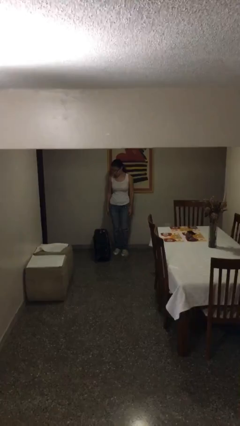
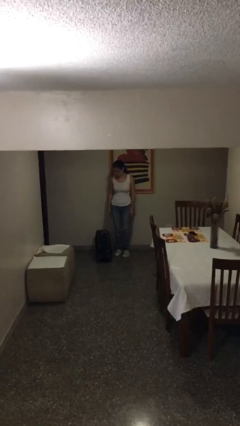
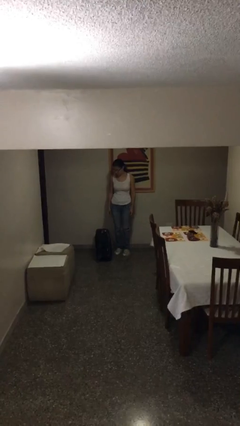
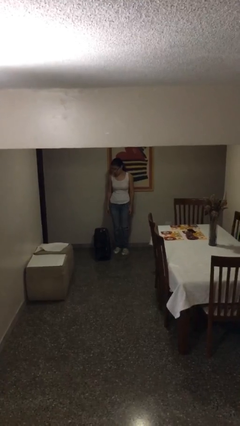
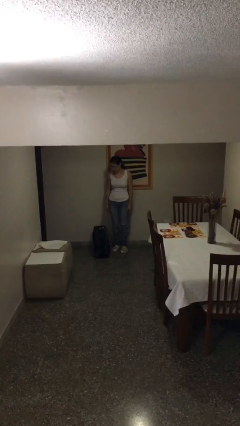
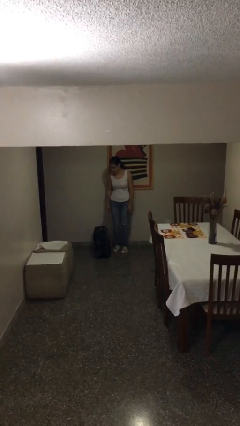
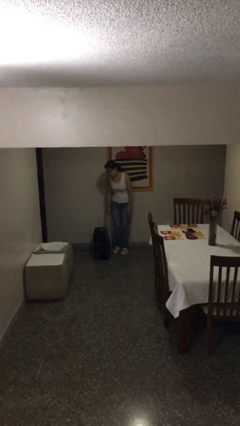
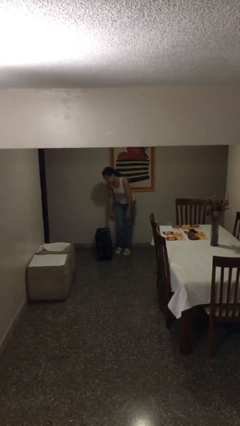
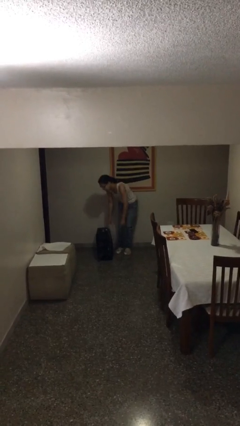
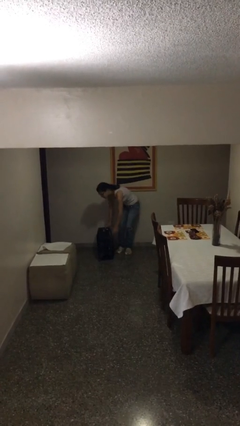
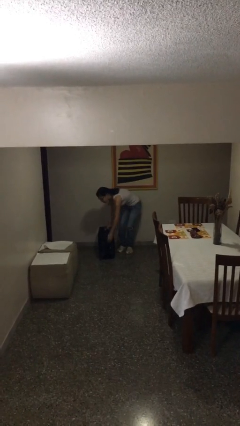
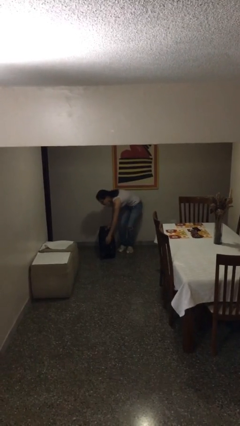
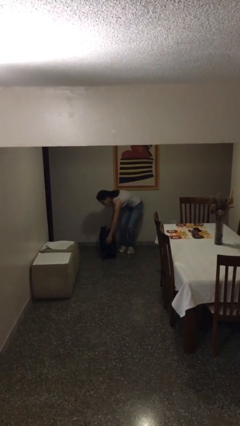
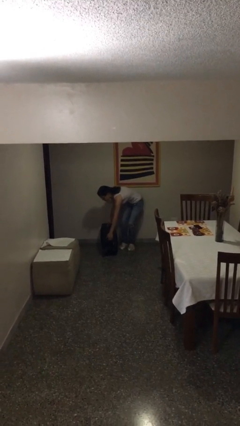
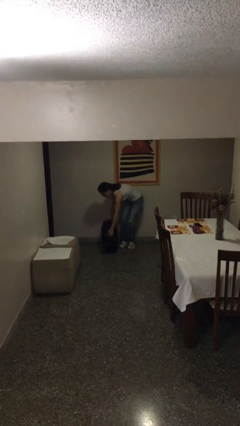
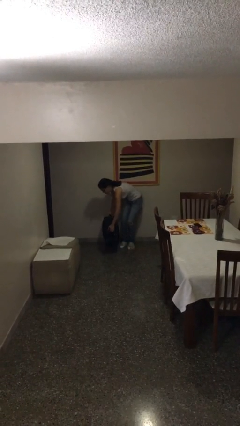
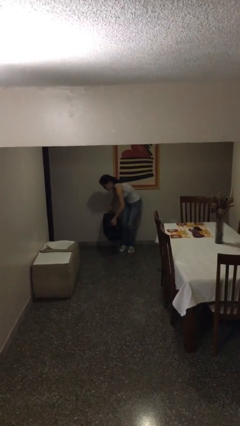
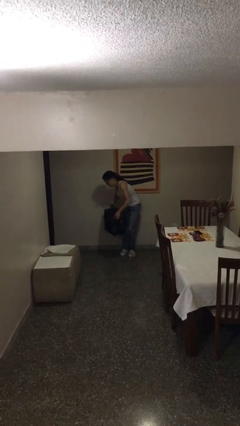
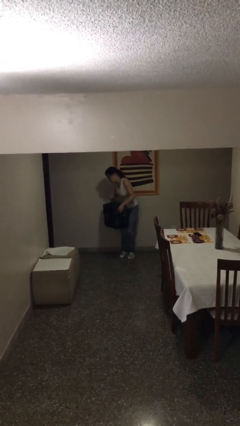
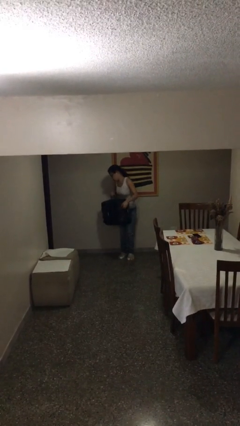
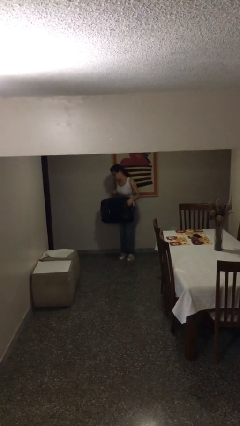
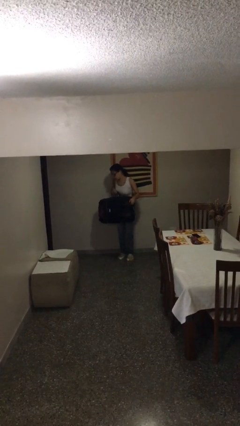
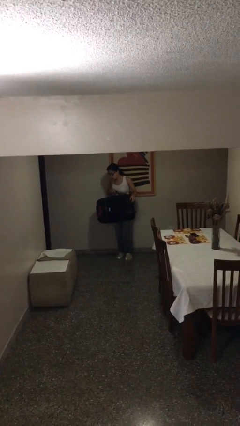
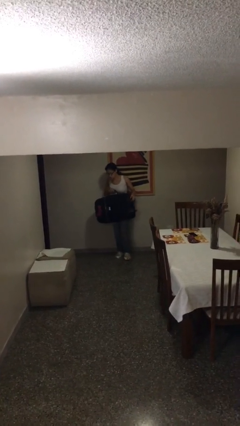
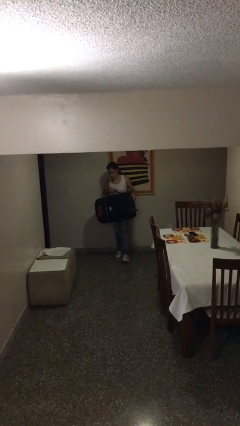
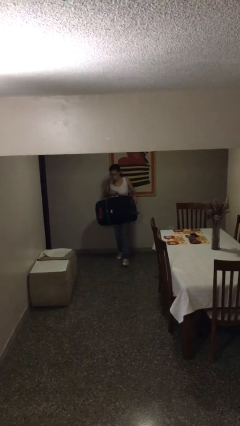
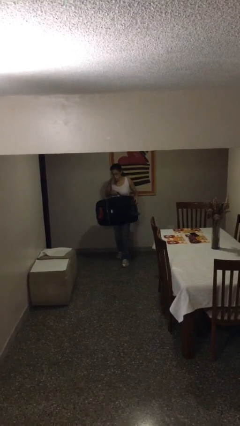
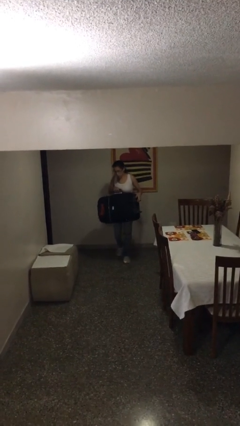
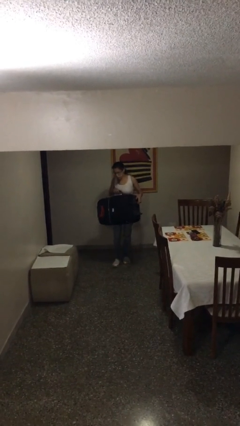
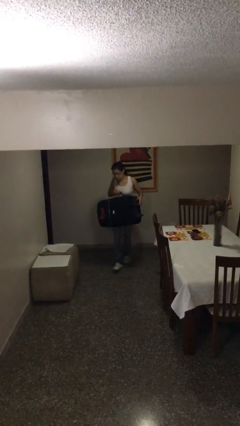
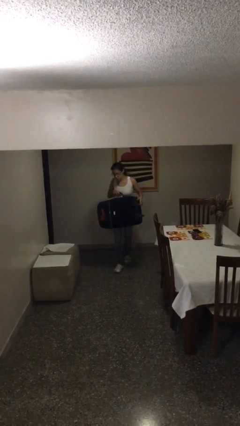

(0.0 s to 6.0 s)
person picks up object from floor

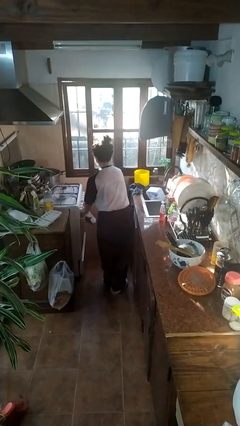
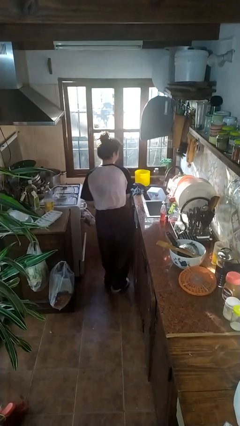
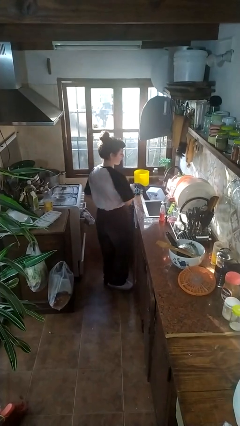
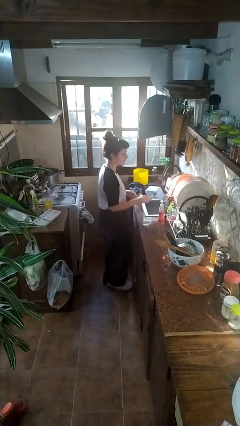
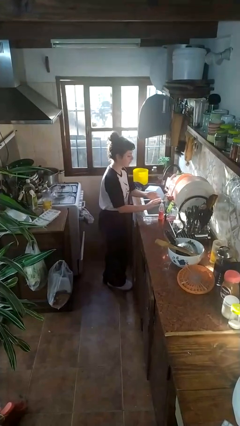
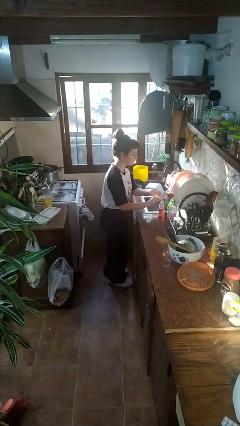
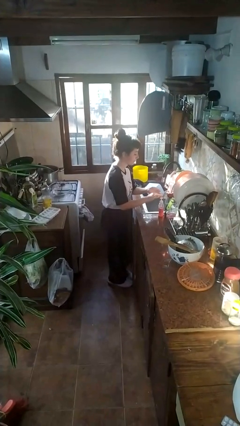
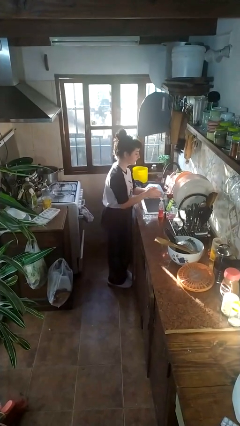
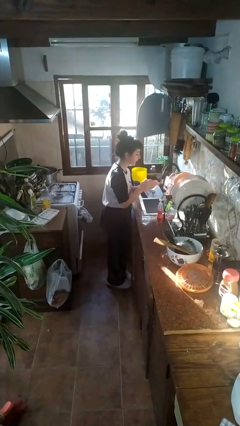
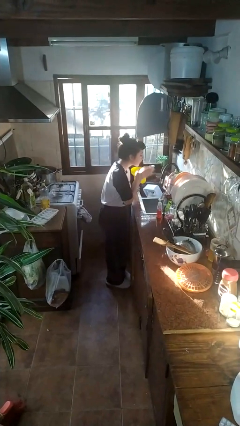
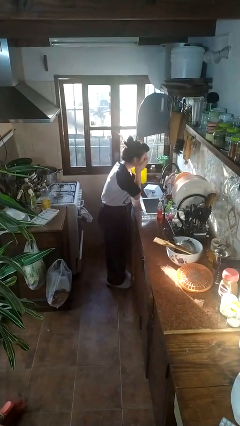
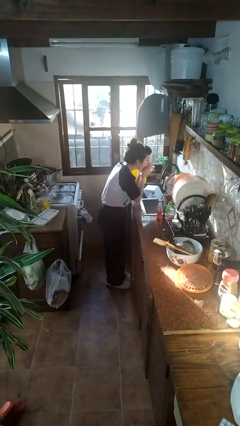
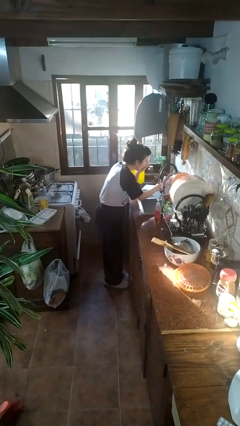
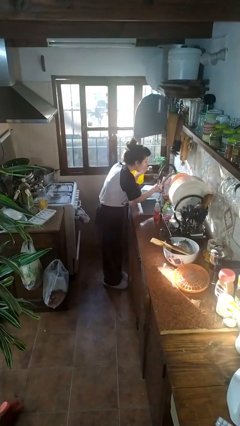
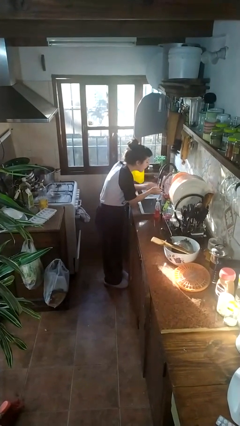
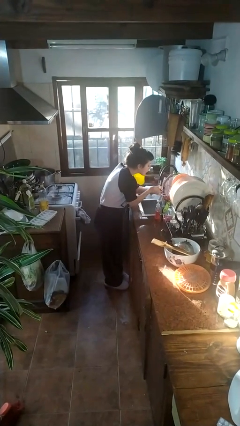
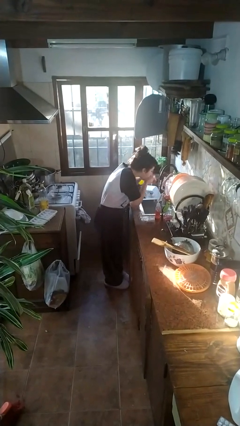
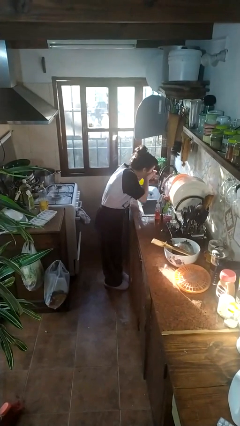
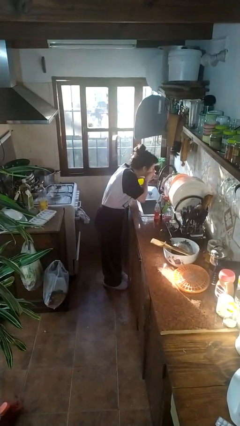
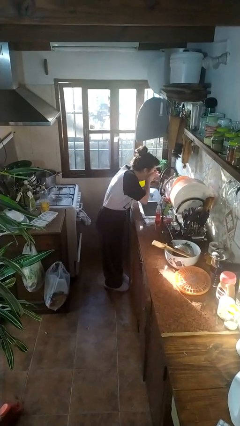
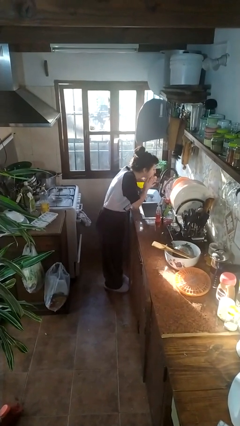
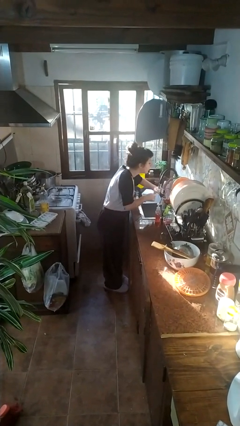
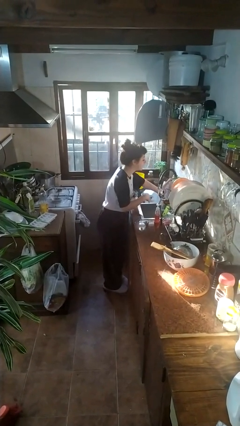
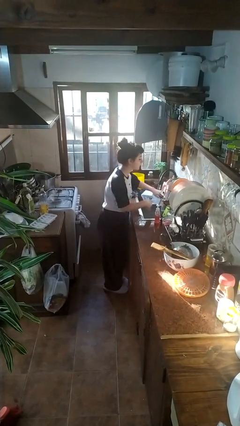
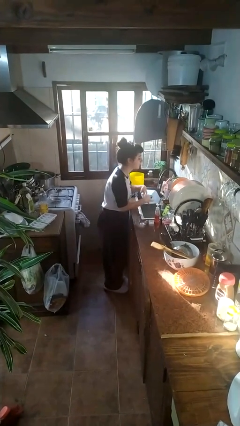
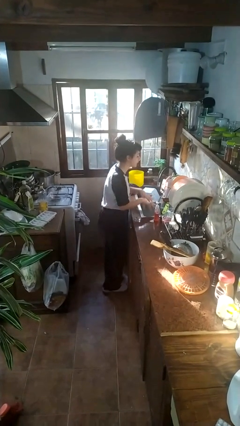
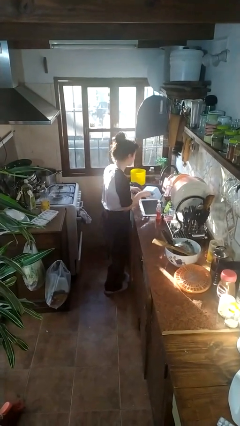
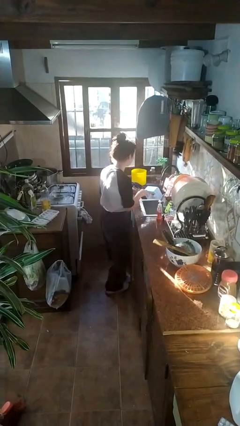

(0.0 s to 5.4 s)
person washes face

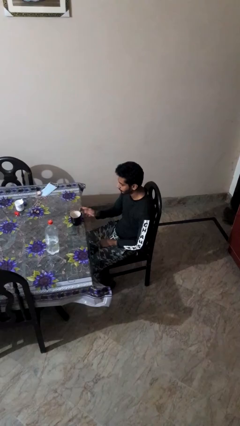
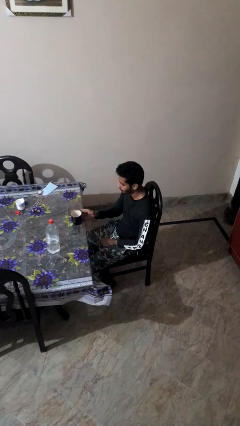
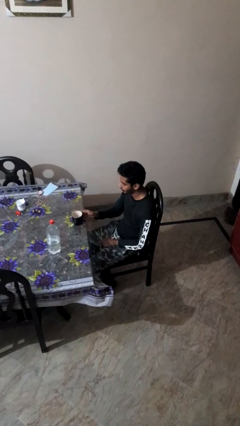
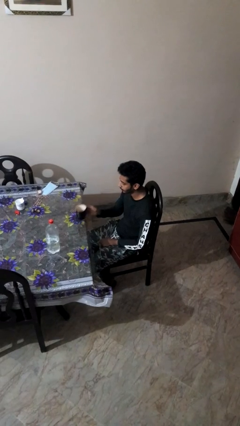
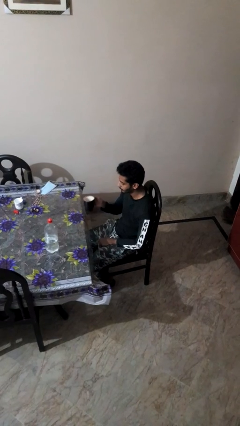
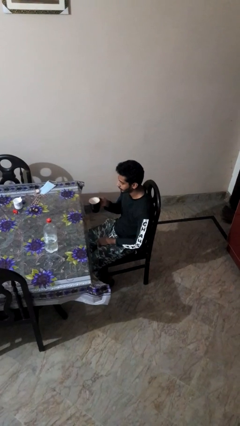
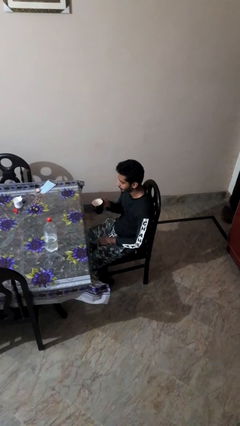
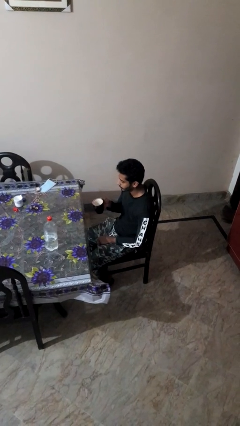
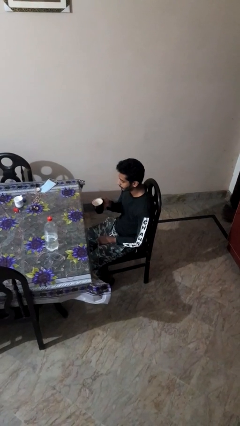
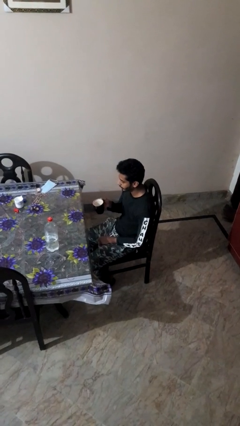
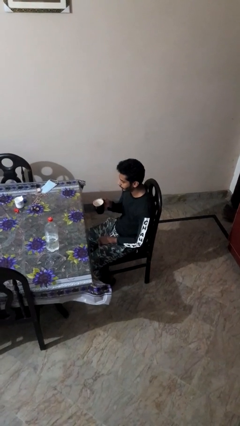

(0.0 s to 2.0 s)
person picks up object from table

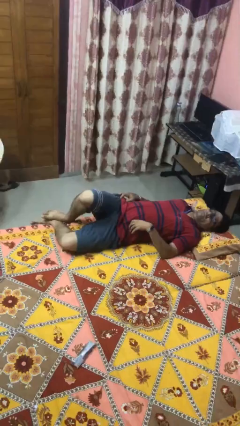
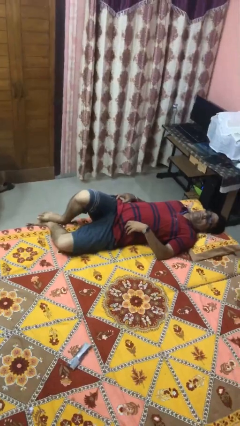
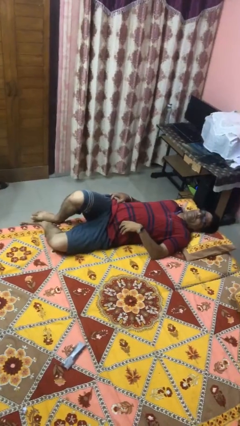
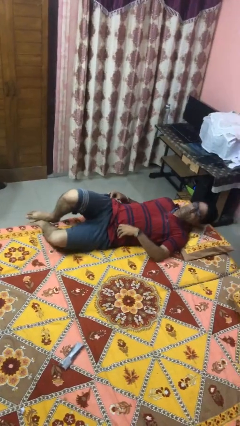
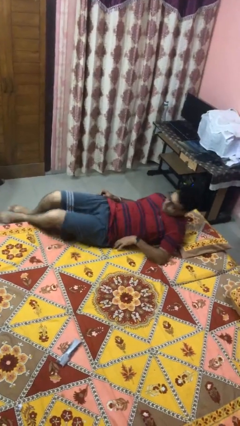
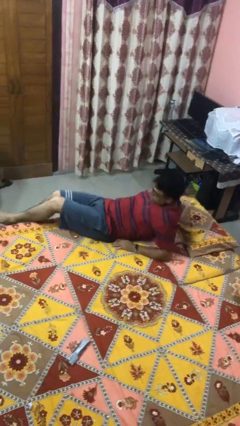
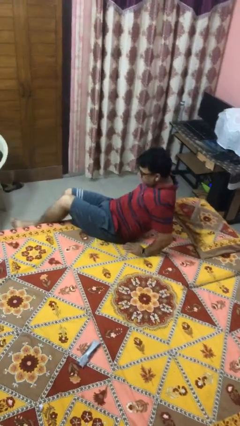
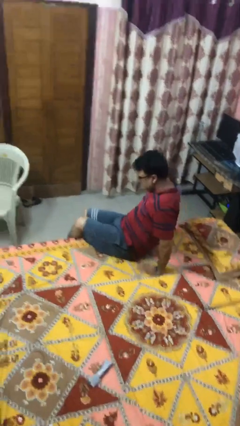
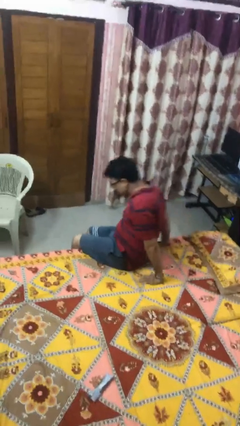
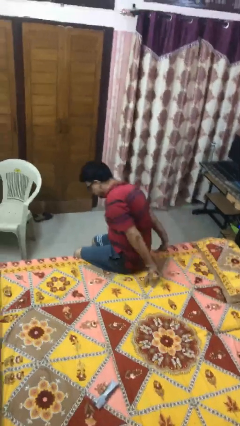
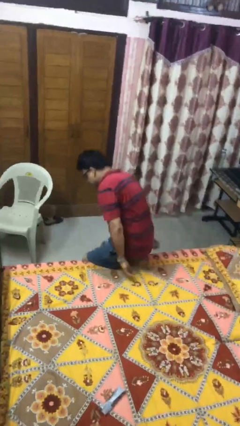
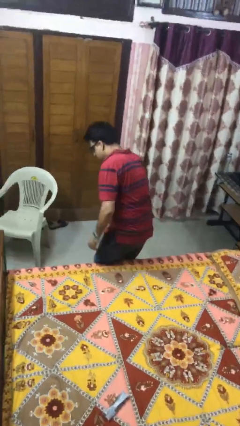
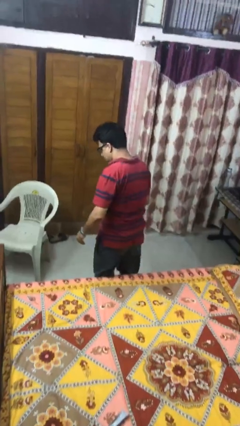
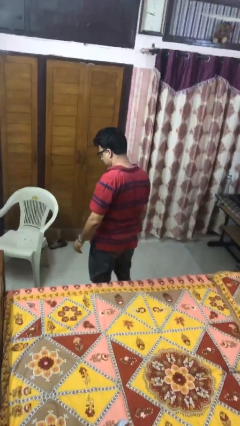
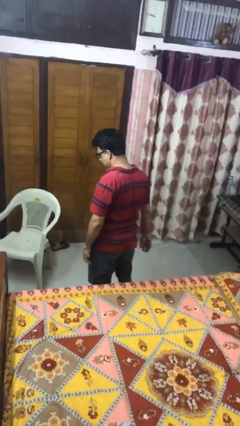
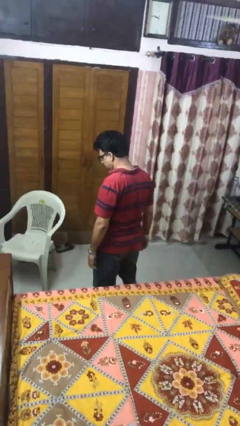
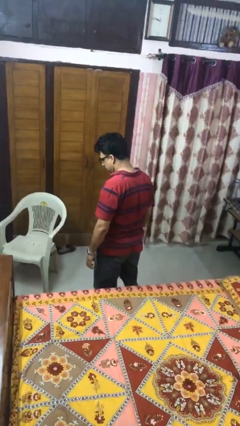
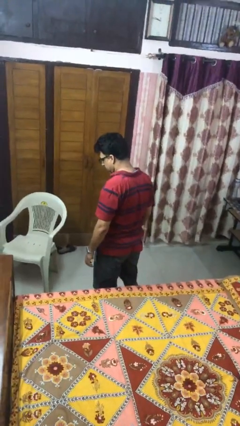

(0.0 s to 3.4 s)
person stands up

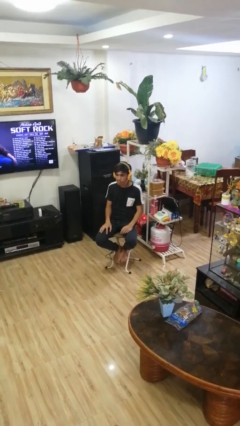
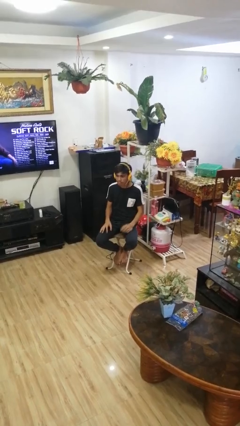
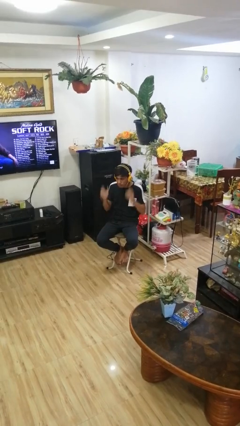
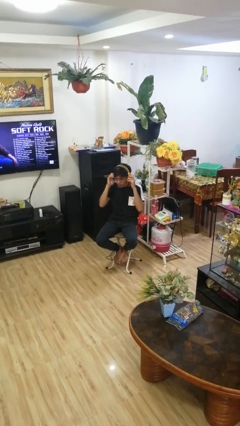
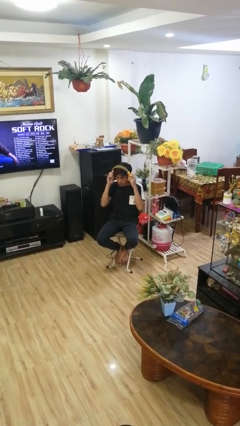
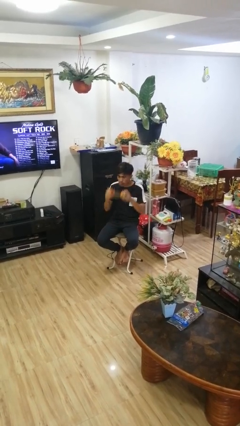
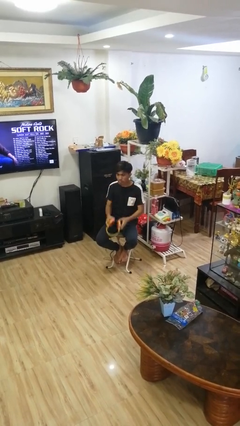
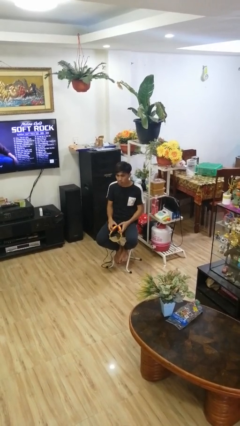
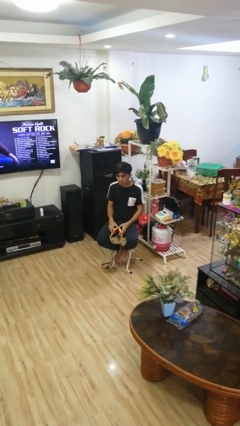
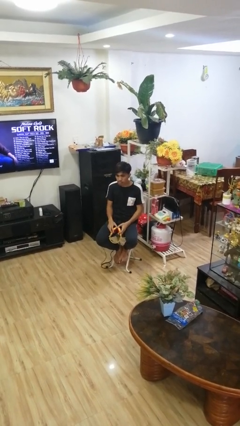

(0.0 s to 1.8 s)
person takes off headphones
